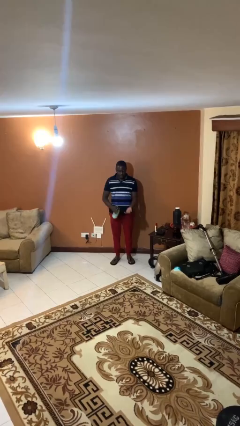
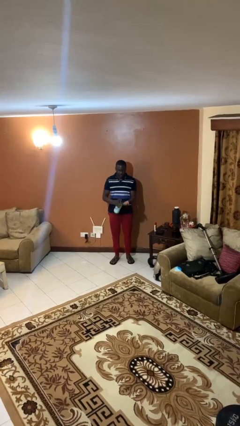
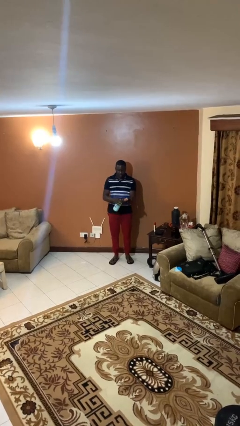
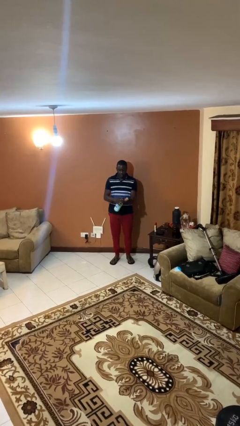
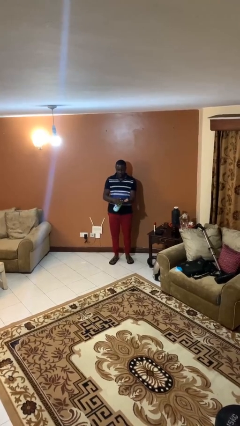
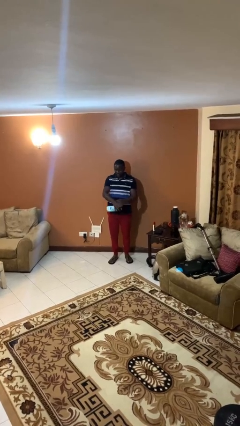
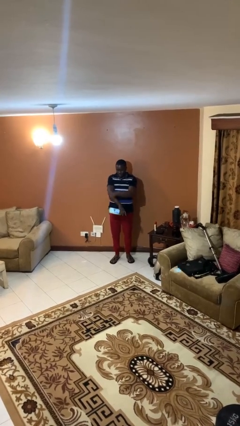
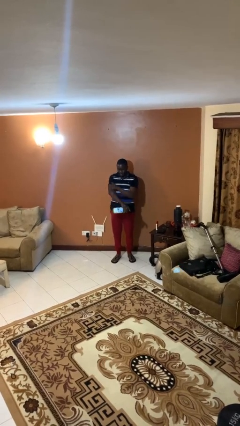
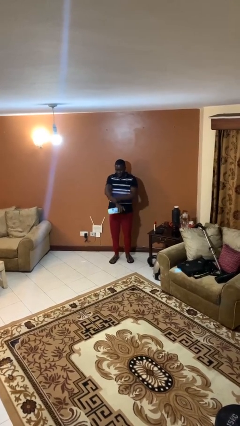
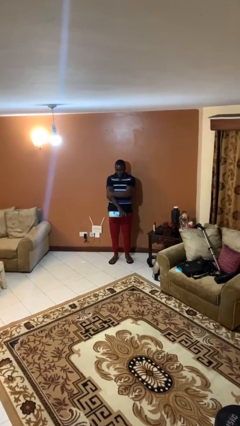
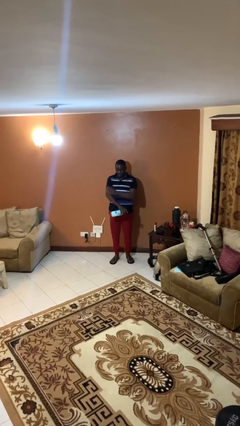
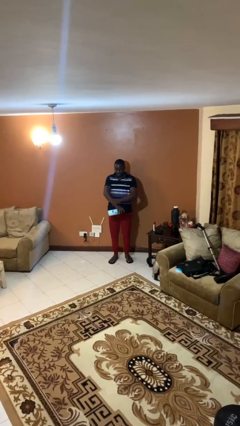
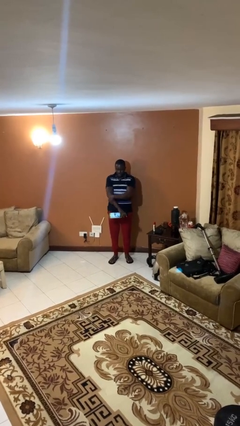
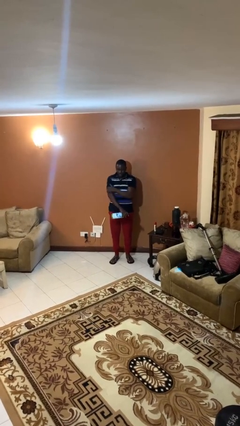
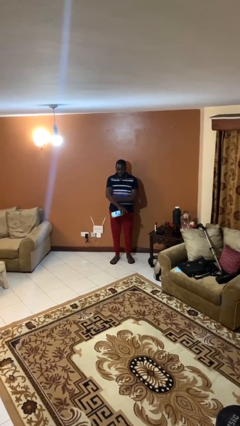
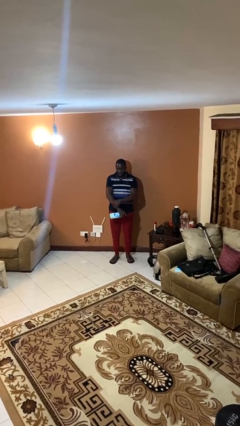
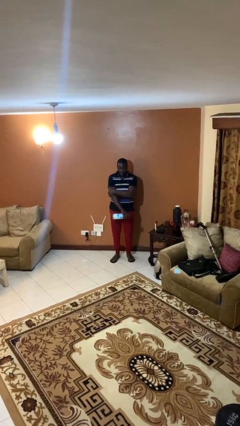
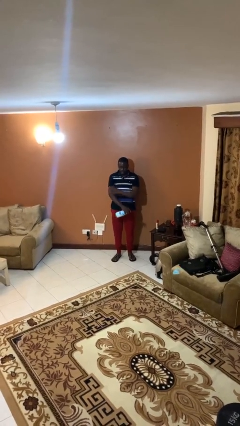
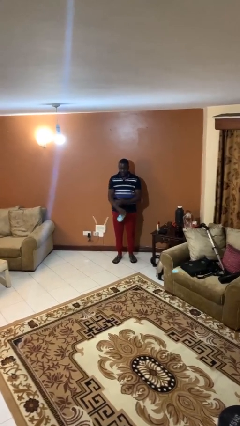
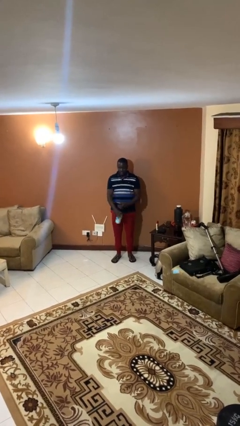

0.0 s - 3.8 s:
person applies sunscreen

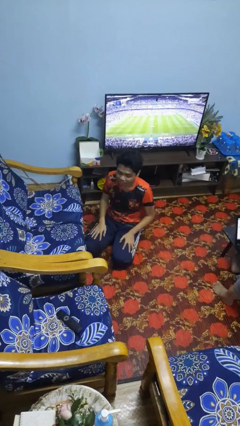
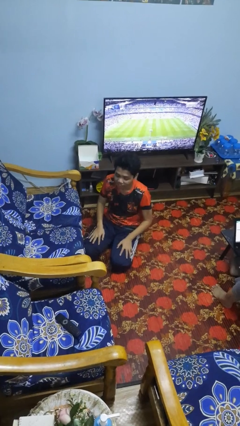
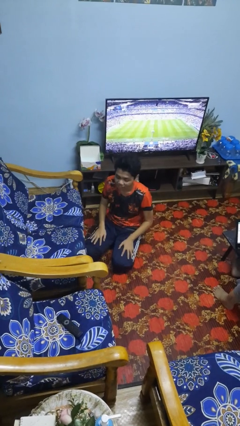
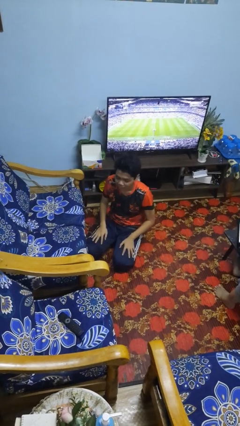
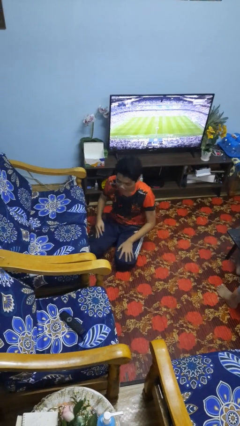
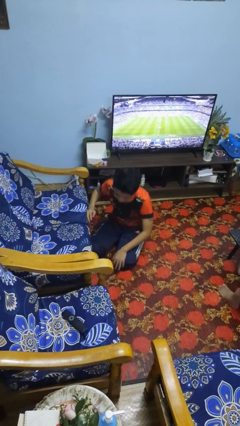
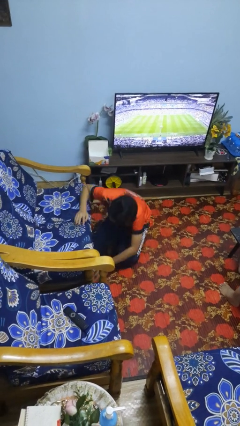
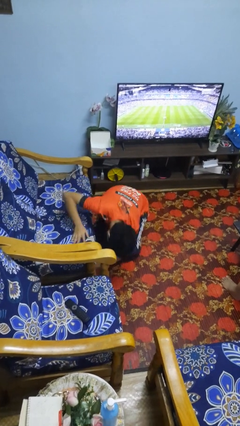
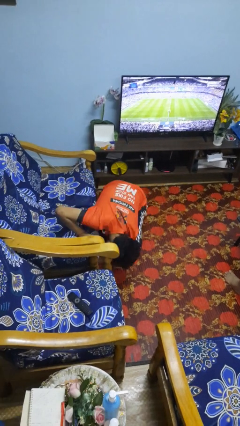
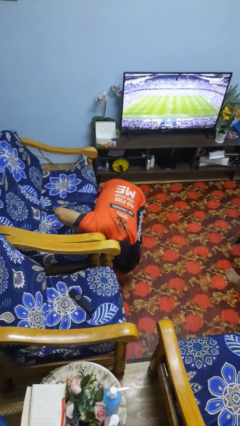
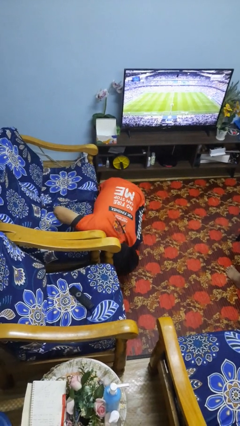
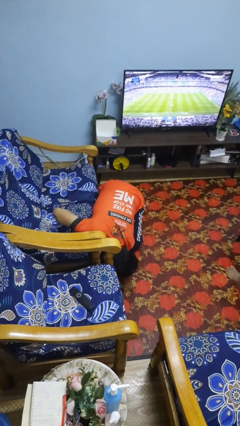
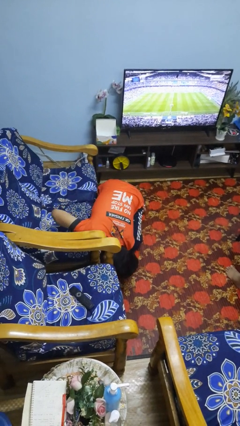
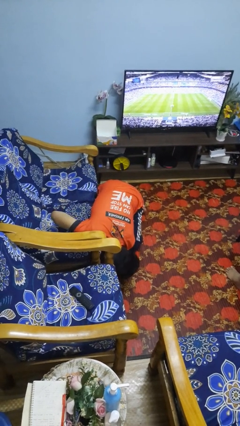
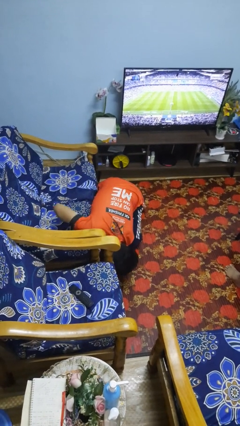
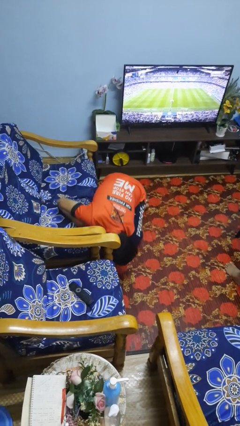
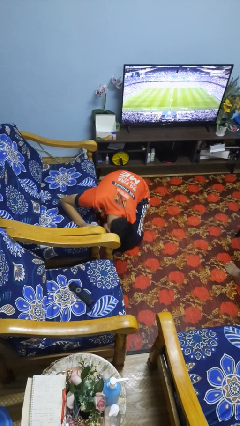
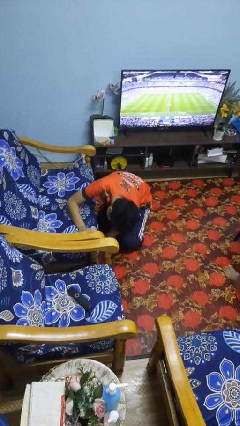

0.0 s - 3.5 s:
person searches under couch

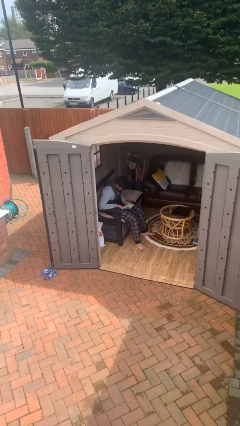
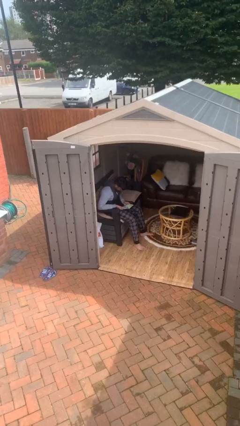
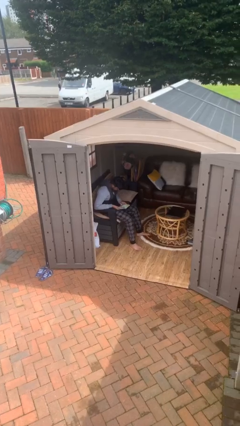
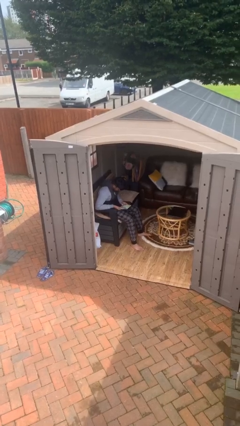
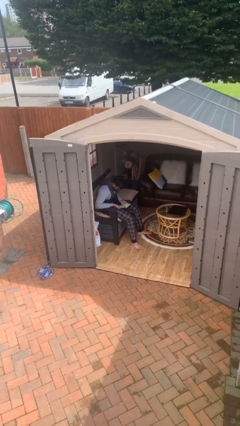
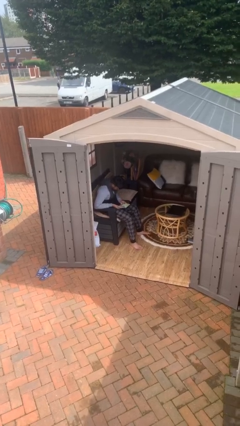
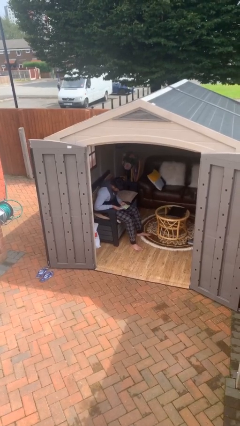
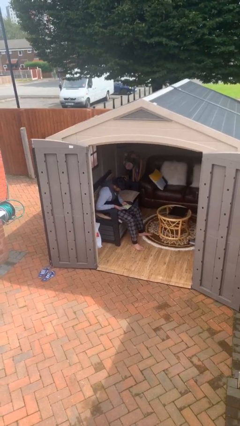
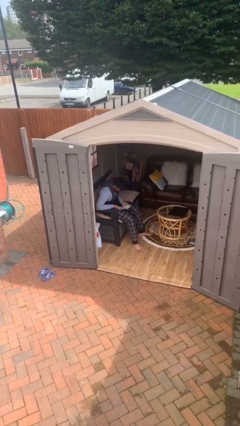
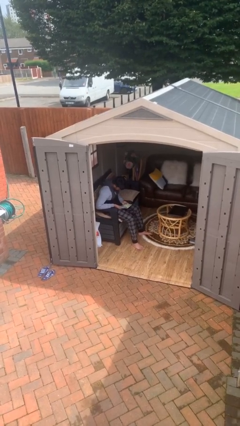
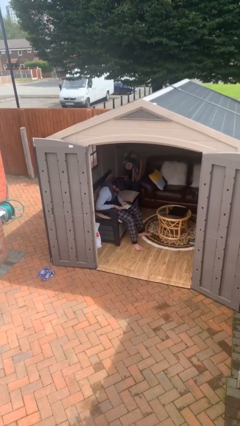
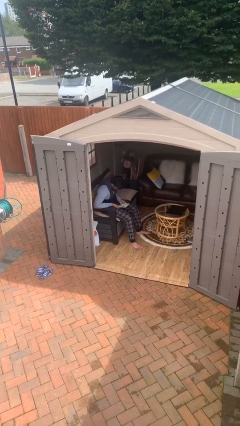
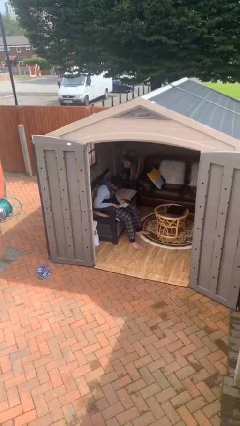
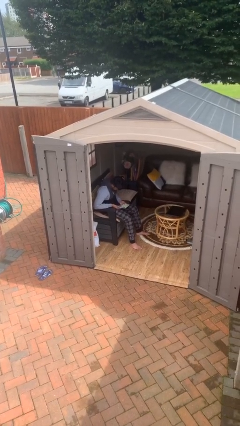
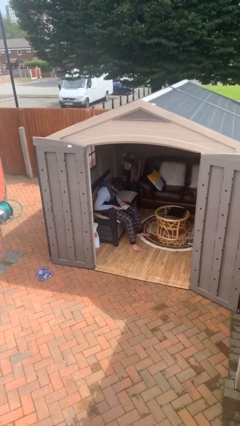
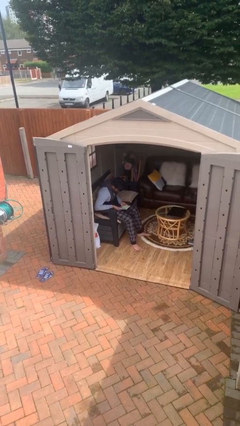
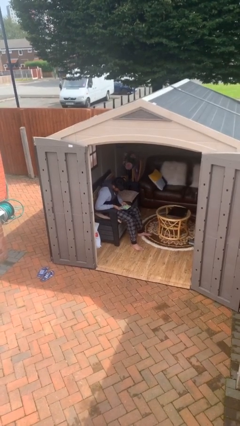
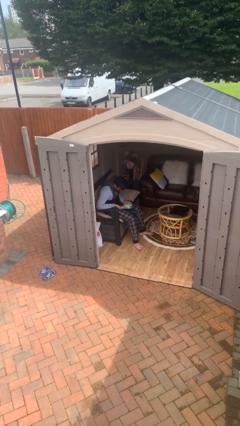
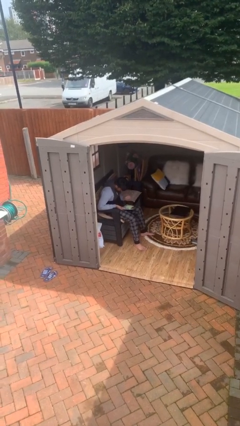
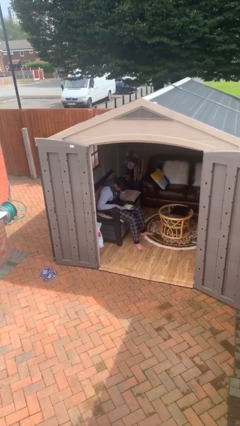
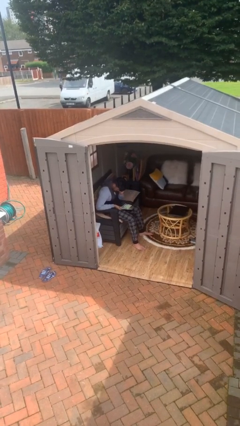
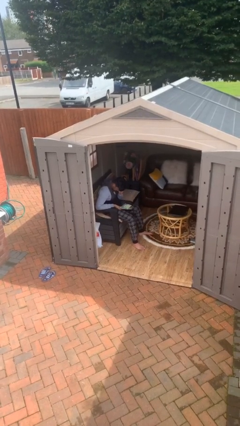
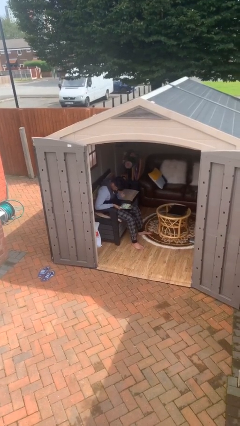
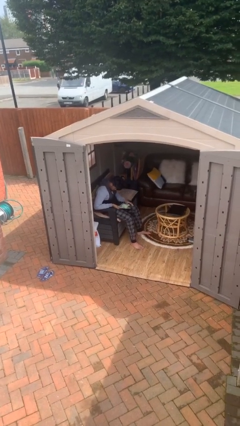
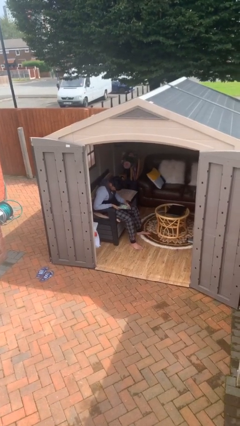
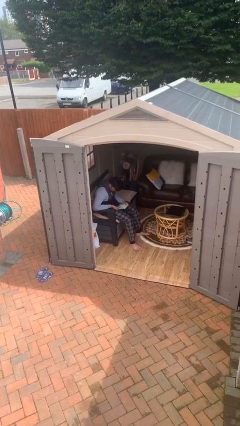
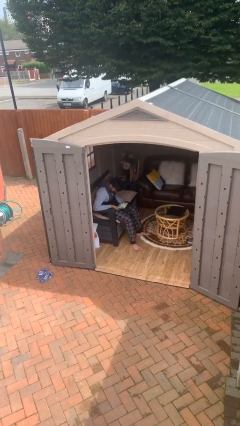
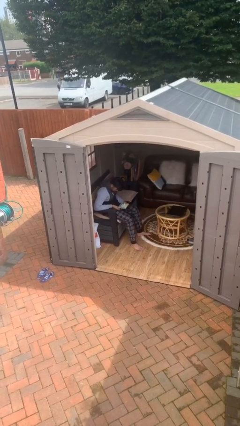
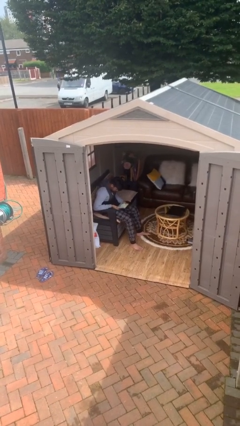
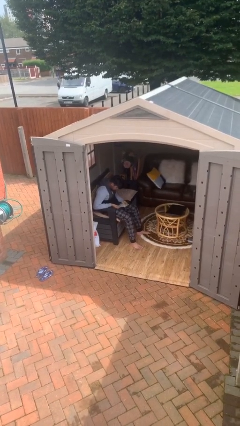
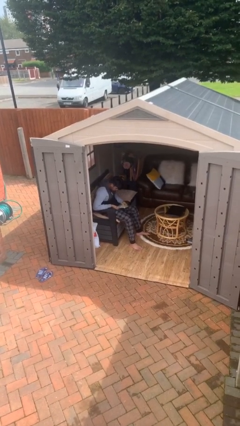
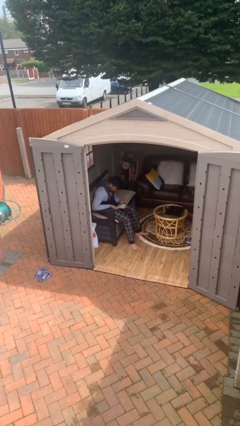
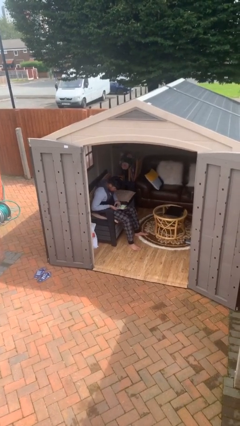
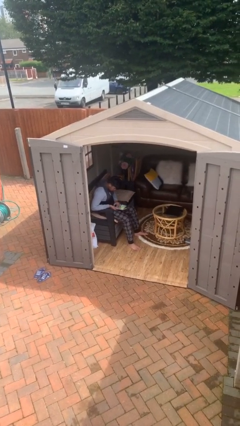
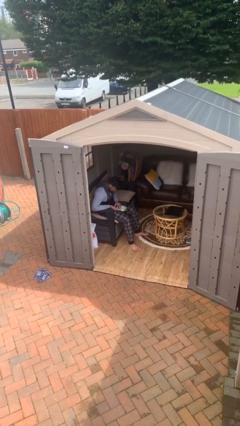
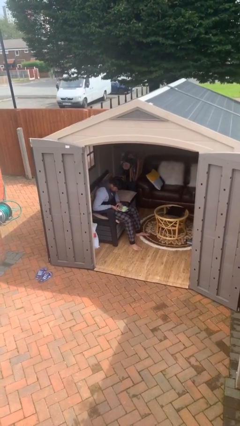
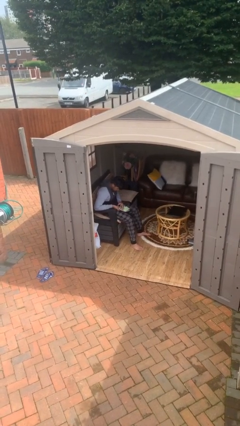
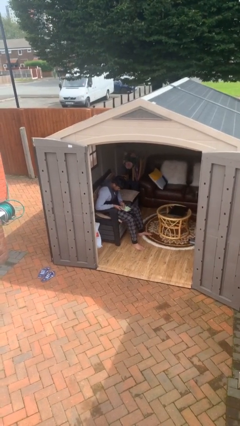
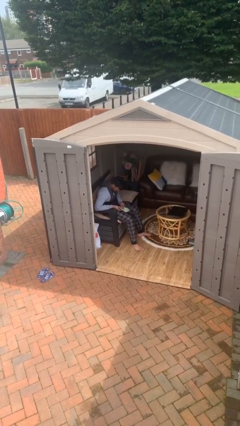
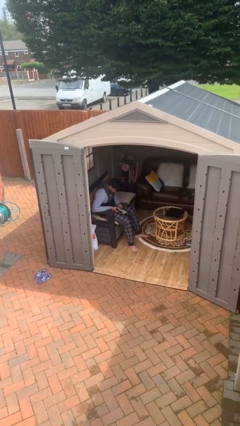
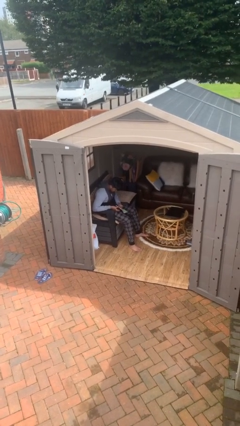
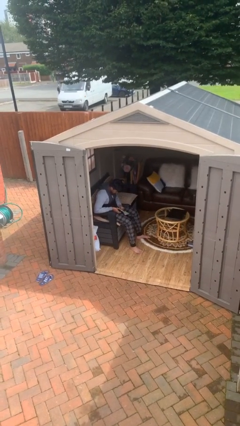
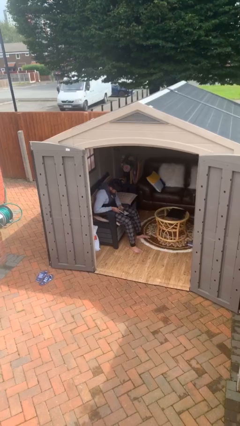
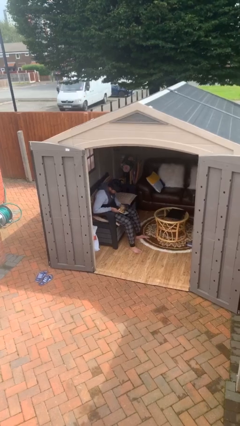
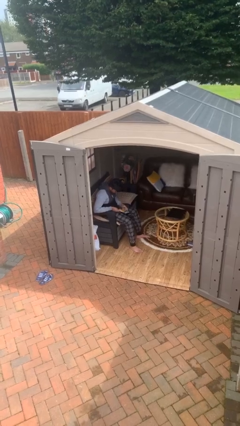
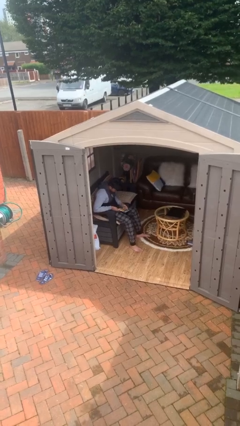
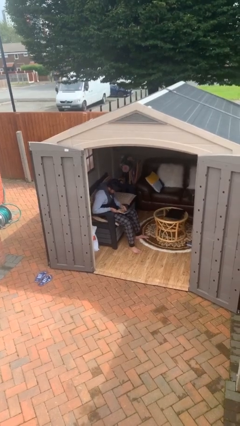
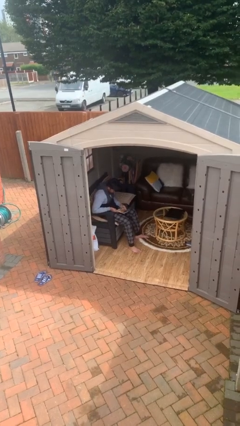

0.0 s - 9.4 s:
person reads document

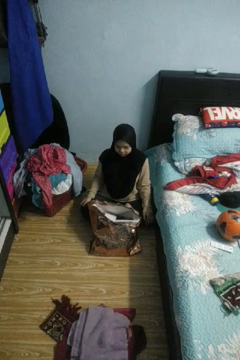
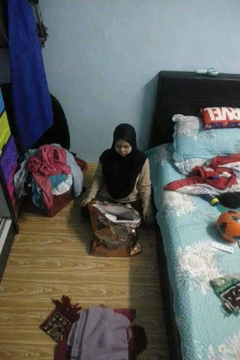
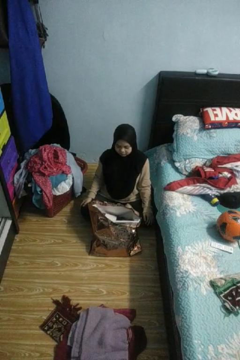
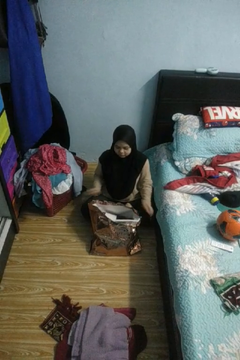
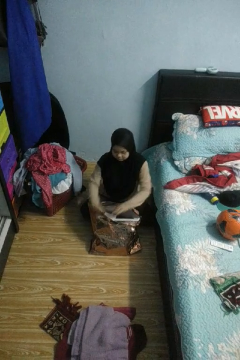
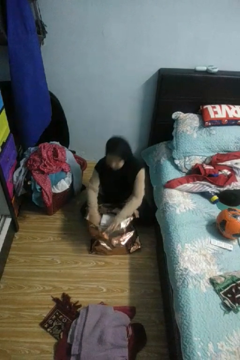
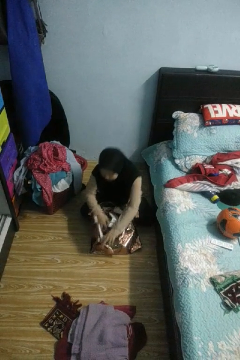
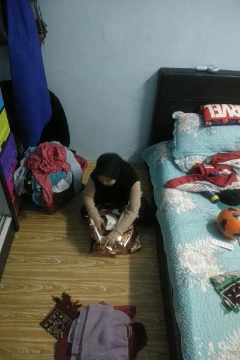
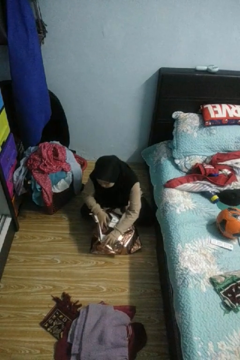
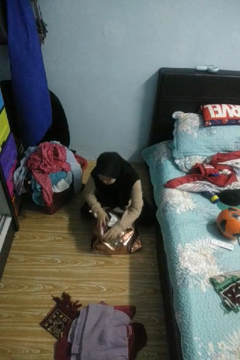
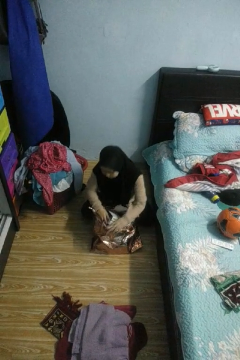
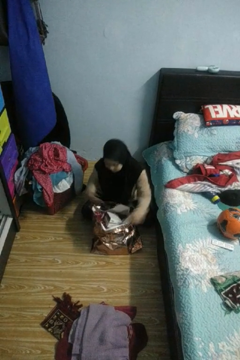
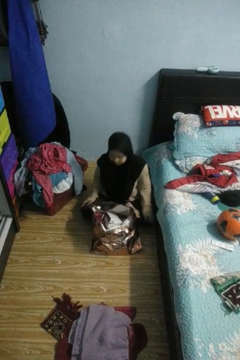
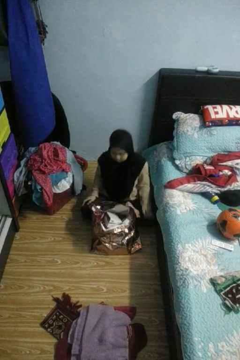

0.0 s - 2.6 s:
person searches in bag
